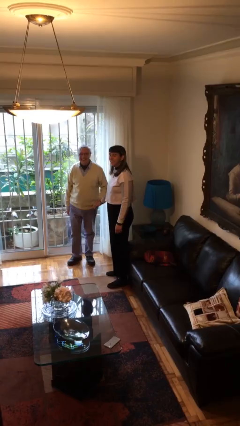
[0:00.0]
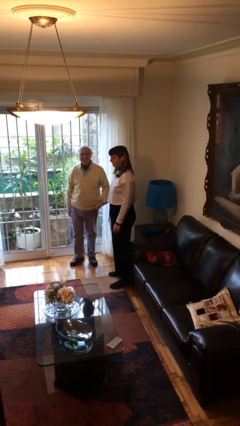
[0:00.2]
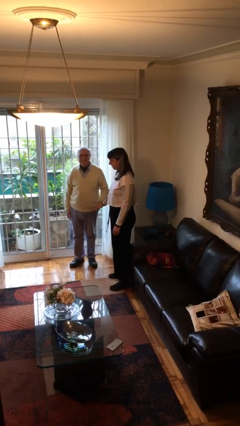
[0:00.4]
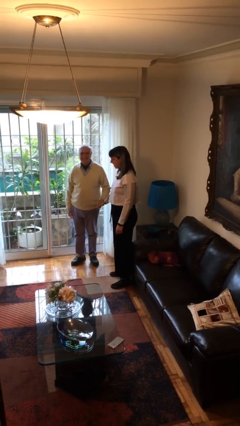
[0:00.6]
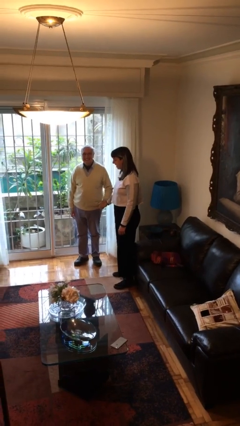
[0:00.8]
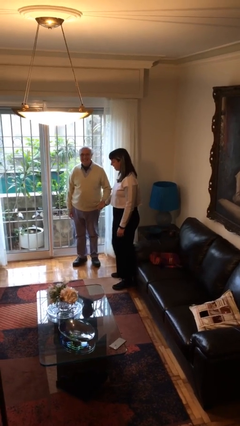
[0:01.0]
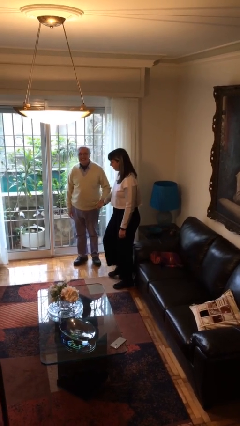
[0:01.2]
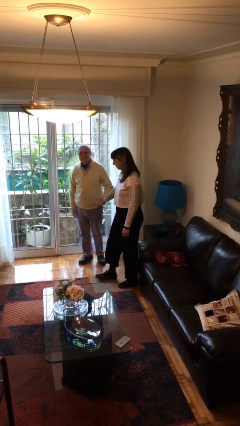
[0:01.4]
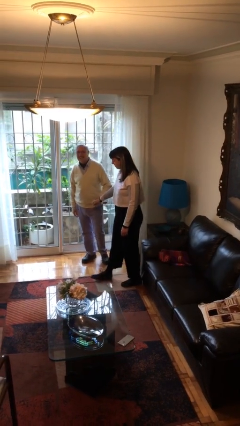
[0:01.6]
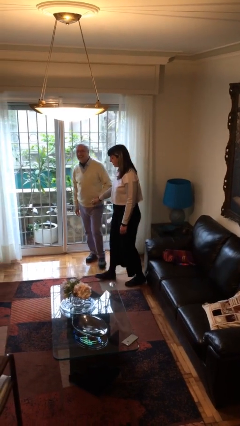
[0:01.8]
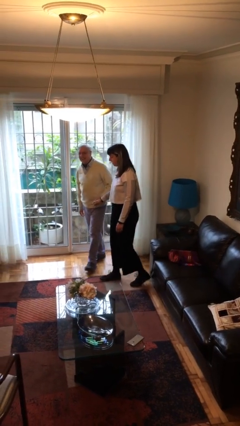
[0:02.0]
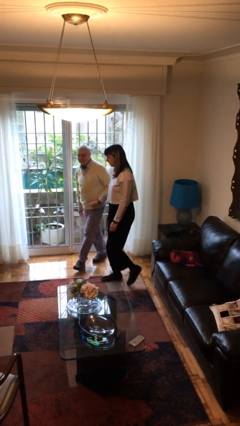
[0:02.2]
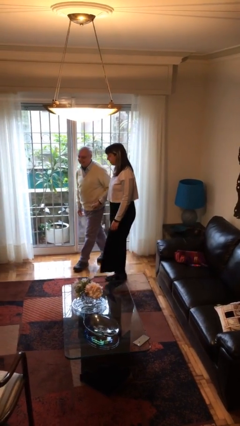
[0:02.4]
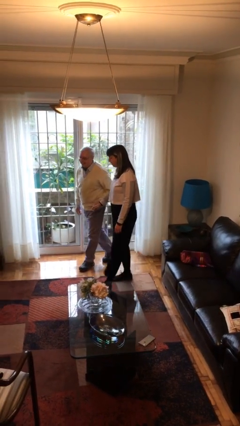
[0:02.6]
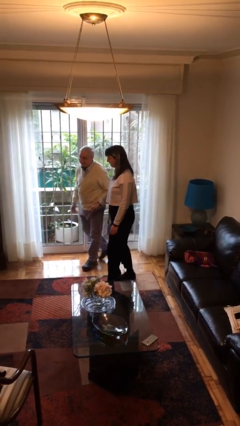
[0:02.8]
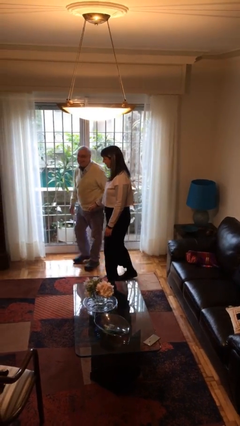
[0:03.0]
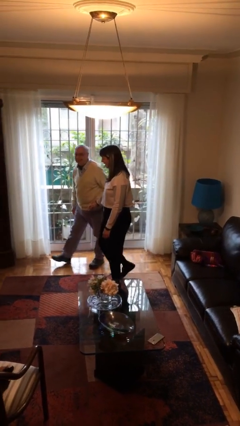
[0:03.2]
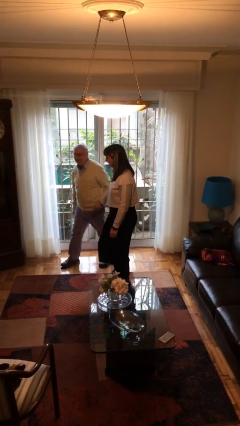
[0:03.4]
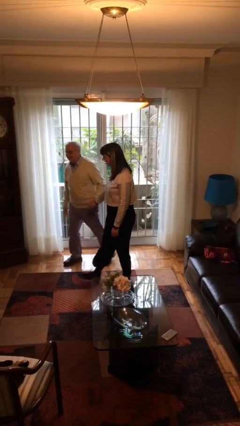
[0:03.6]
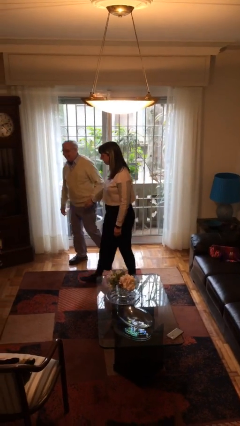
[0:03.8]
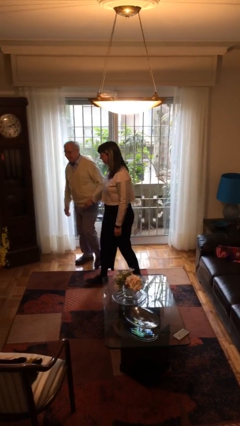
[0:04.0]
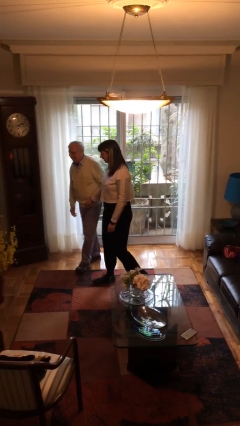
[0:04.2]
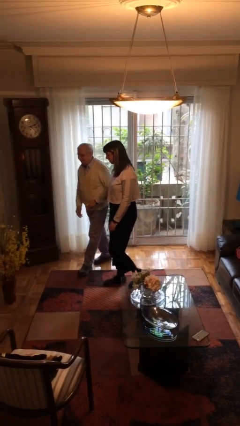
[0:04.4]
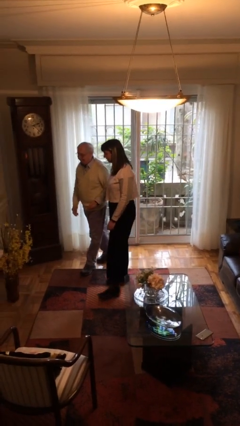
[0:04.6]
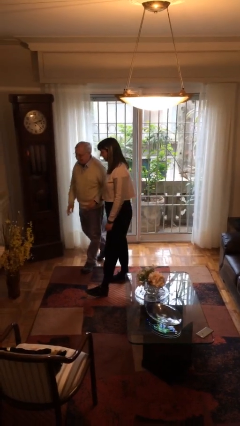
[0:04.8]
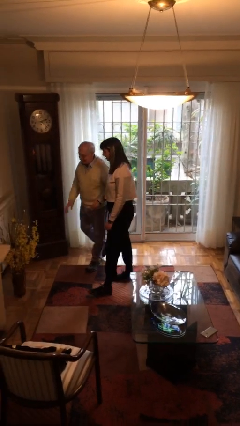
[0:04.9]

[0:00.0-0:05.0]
person holds hand

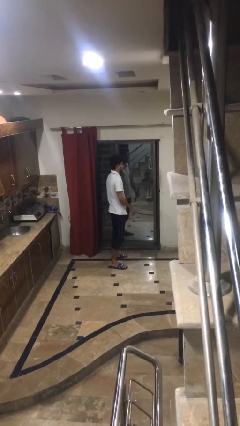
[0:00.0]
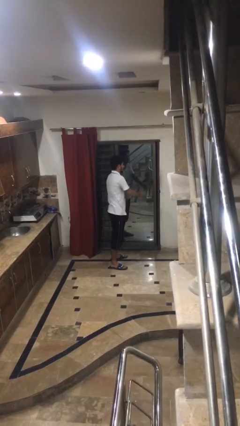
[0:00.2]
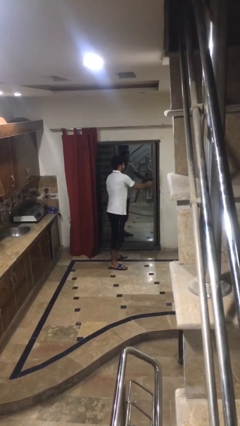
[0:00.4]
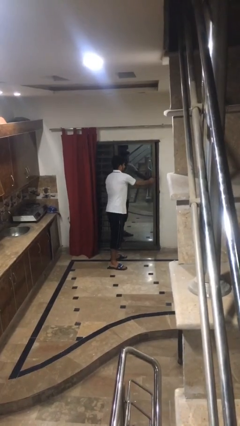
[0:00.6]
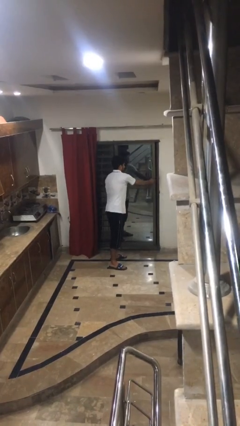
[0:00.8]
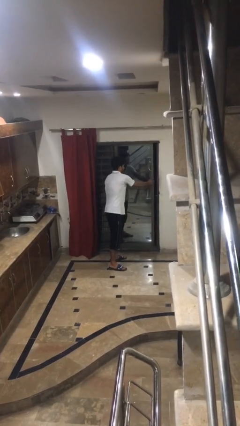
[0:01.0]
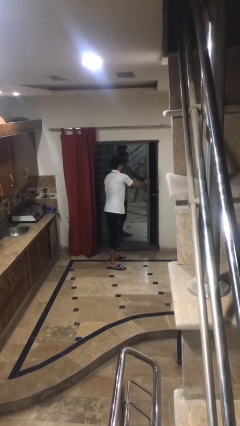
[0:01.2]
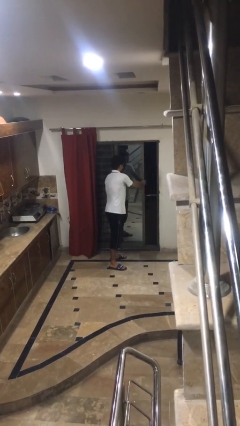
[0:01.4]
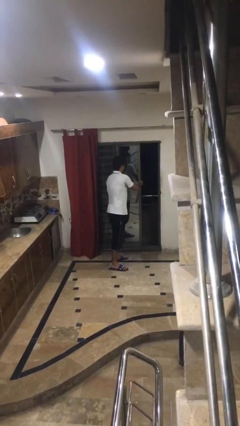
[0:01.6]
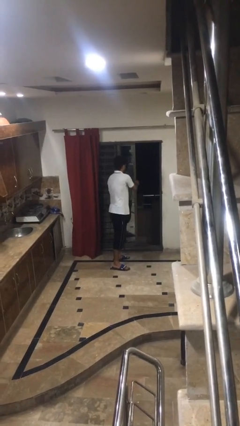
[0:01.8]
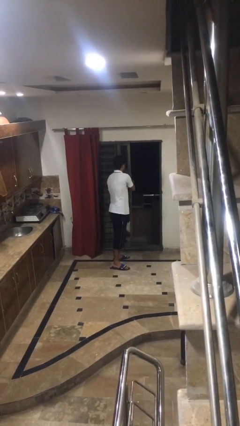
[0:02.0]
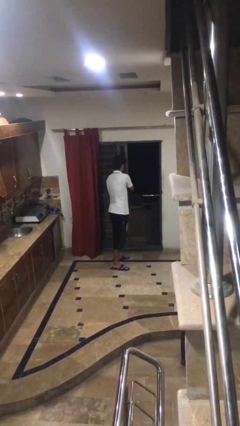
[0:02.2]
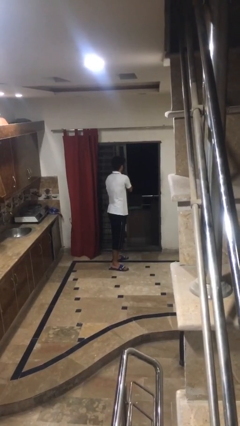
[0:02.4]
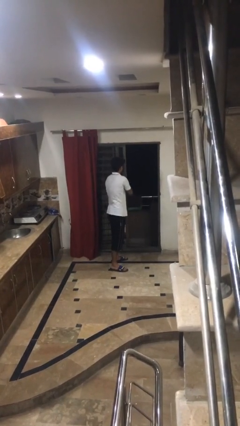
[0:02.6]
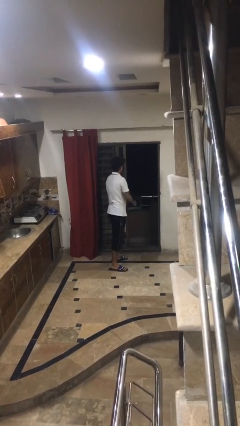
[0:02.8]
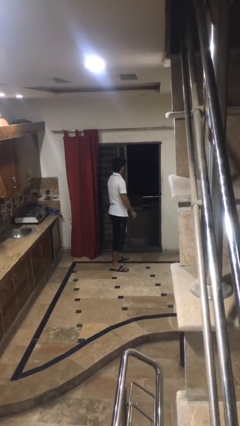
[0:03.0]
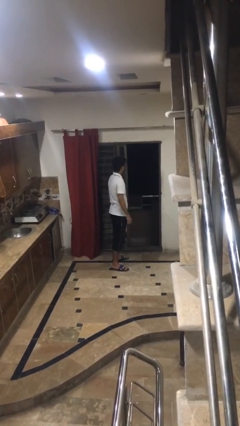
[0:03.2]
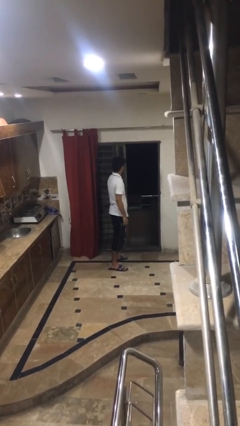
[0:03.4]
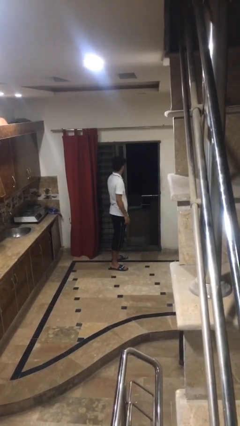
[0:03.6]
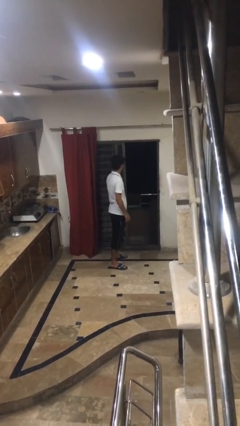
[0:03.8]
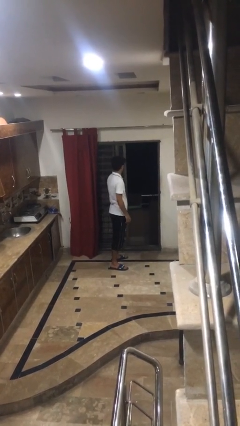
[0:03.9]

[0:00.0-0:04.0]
person opens sliding door

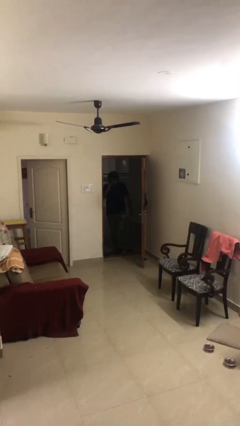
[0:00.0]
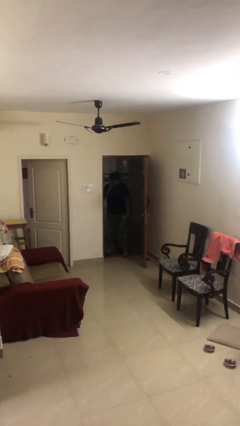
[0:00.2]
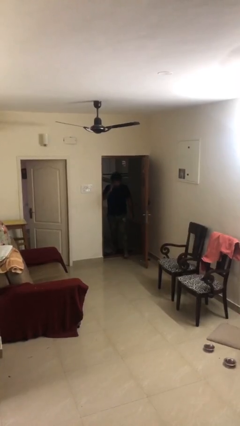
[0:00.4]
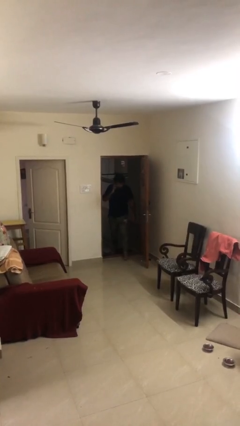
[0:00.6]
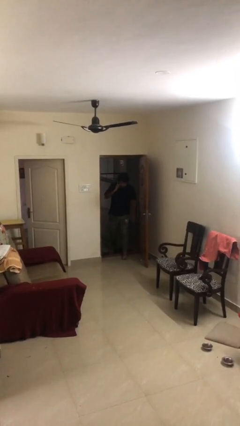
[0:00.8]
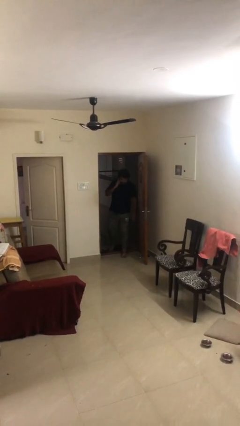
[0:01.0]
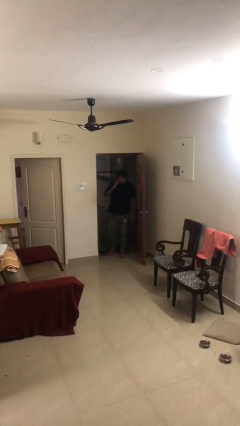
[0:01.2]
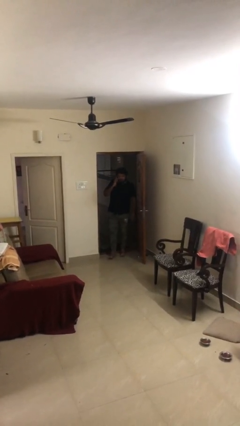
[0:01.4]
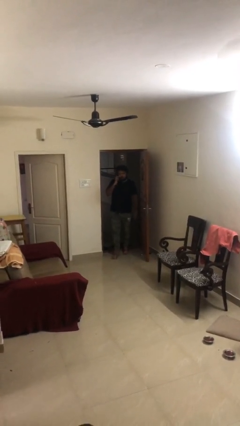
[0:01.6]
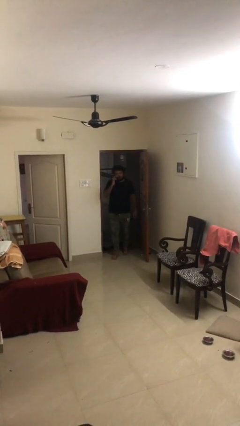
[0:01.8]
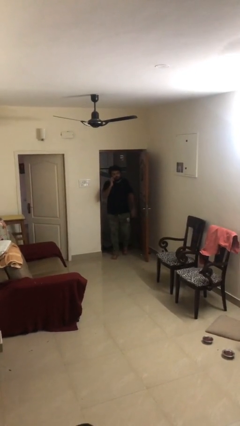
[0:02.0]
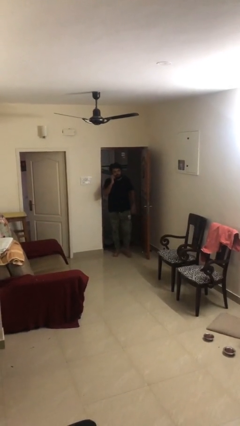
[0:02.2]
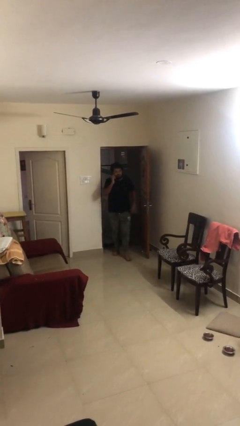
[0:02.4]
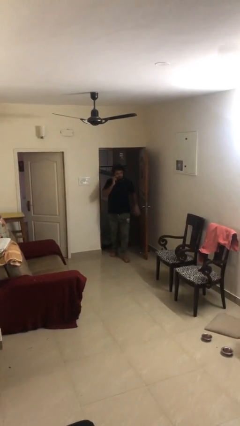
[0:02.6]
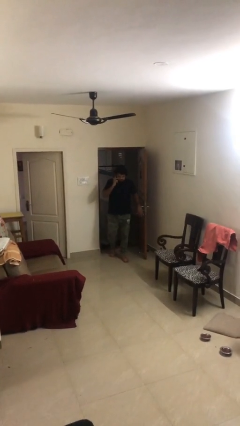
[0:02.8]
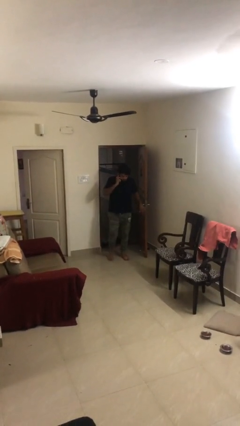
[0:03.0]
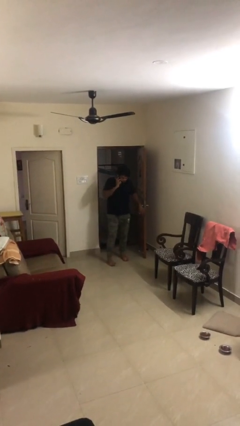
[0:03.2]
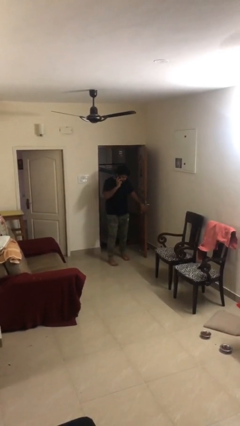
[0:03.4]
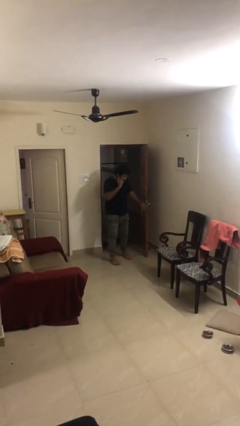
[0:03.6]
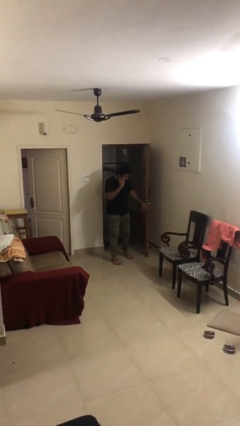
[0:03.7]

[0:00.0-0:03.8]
person enters scene through structure

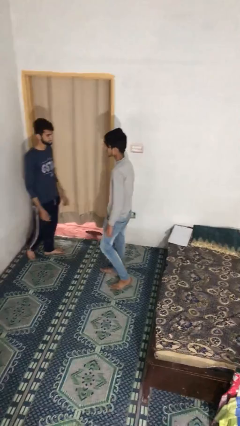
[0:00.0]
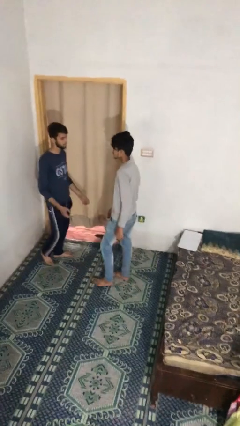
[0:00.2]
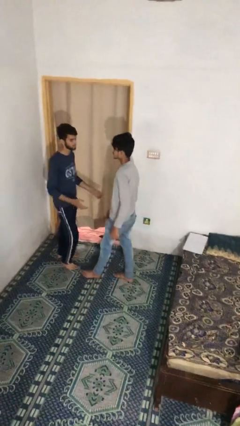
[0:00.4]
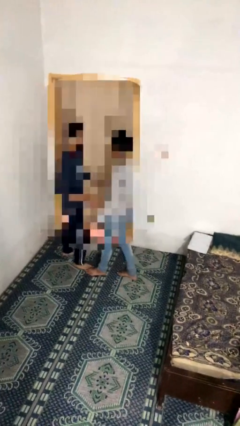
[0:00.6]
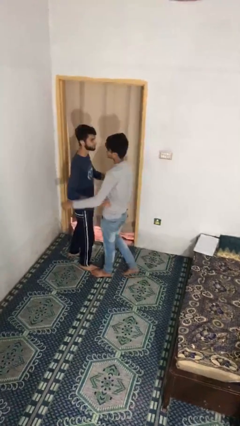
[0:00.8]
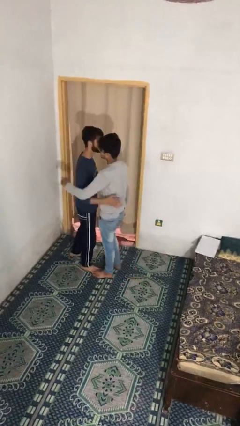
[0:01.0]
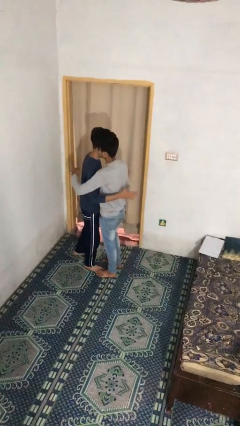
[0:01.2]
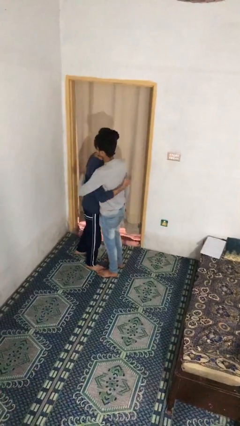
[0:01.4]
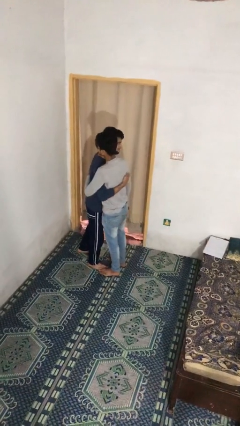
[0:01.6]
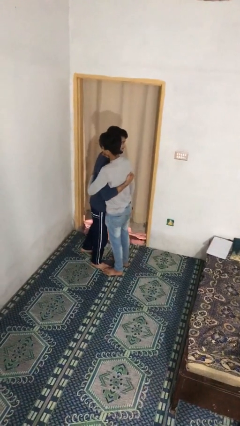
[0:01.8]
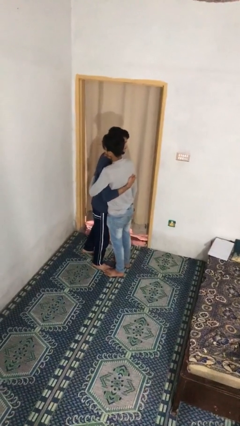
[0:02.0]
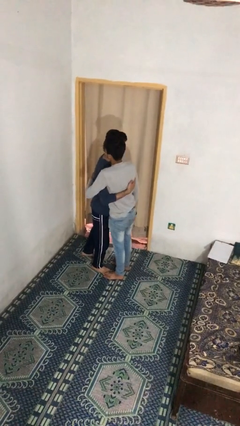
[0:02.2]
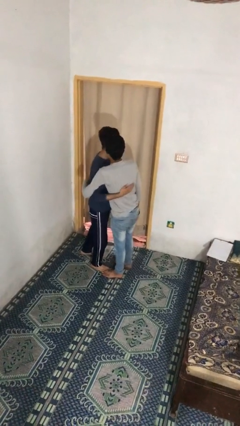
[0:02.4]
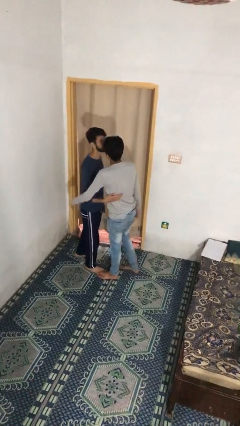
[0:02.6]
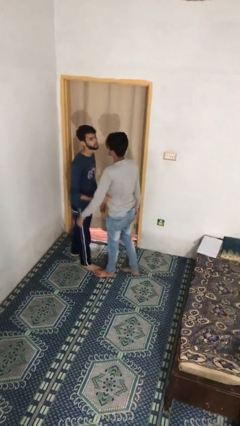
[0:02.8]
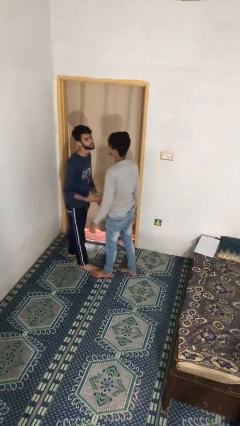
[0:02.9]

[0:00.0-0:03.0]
person embraces person

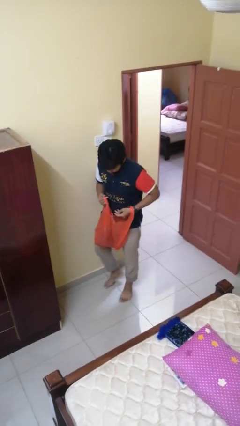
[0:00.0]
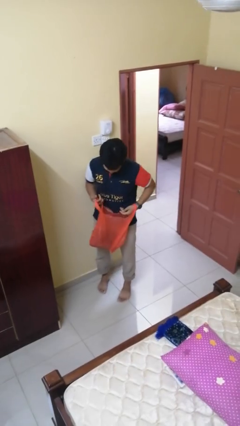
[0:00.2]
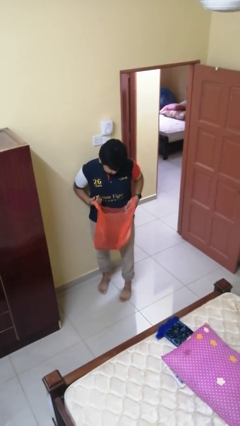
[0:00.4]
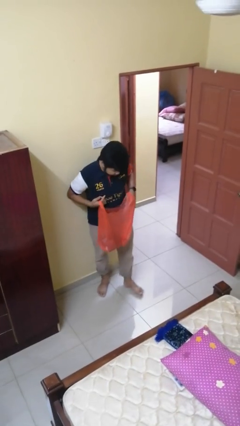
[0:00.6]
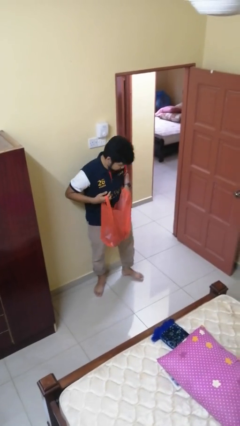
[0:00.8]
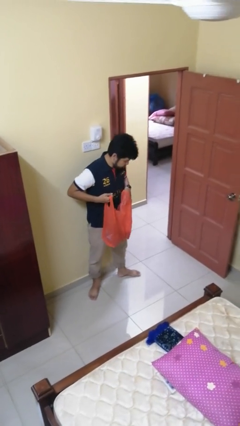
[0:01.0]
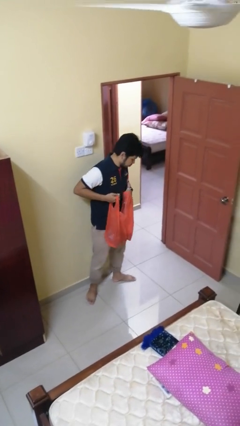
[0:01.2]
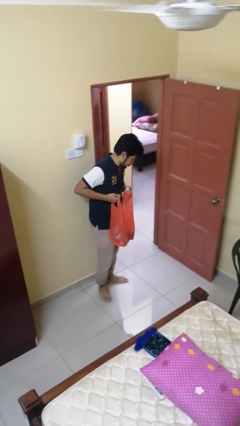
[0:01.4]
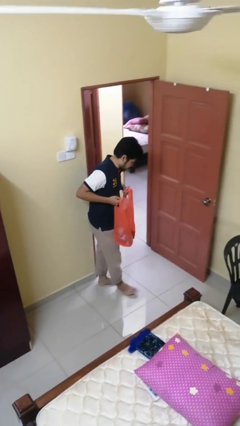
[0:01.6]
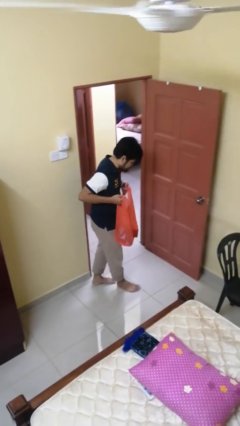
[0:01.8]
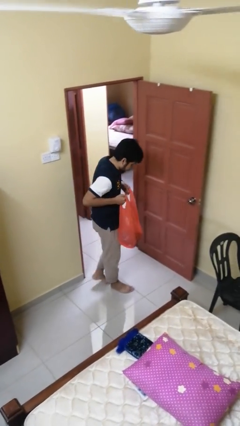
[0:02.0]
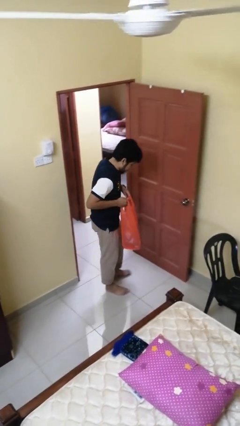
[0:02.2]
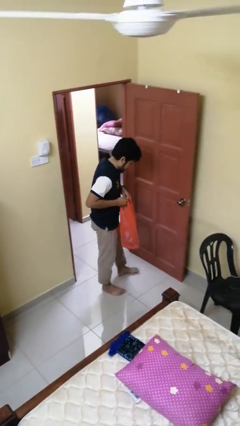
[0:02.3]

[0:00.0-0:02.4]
person carries groceries
